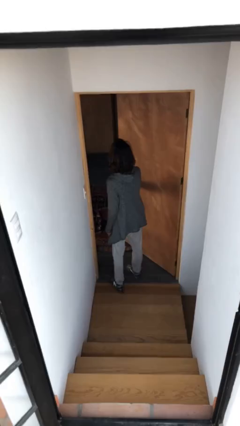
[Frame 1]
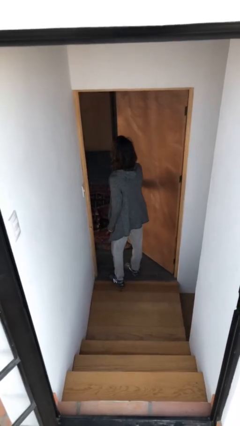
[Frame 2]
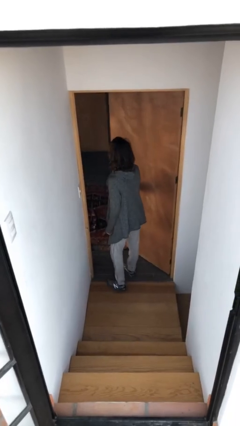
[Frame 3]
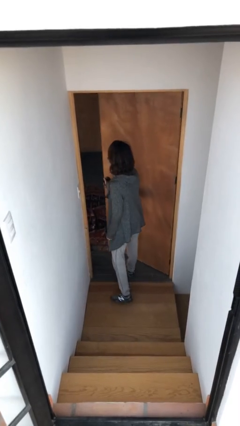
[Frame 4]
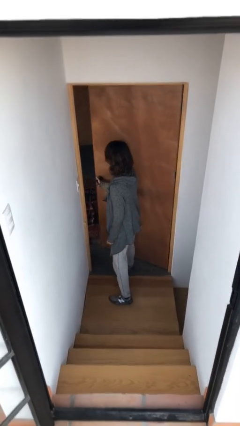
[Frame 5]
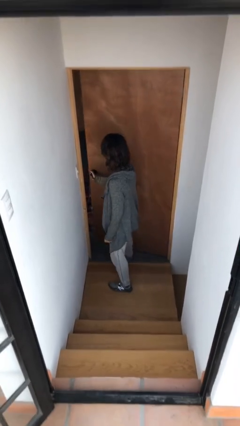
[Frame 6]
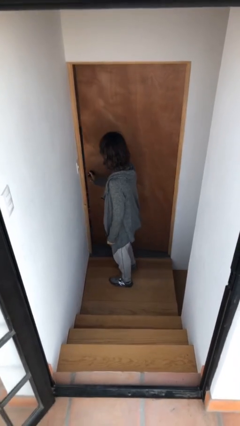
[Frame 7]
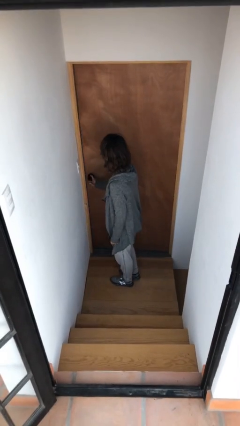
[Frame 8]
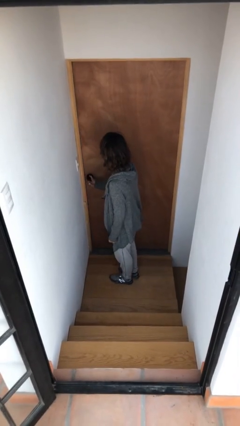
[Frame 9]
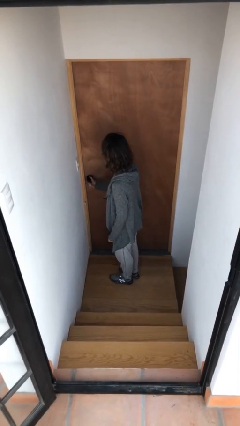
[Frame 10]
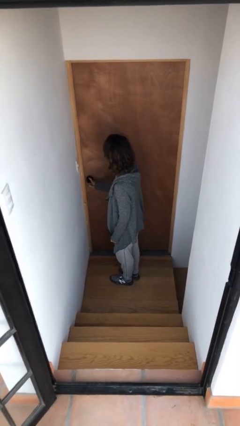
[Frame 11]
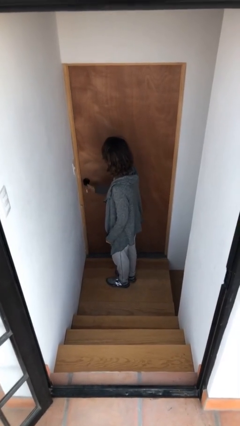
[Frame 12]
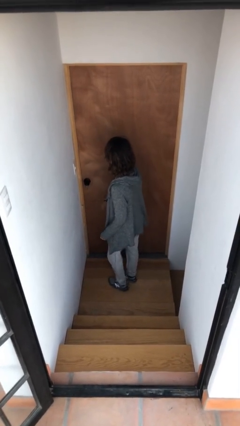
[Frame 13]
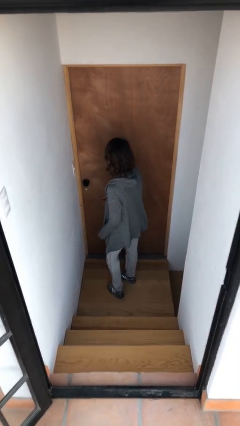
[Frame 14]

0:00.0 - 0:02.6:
person closes facility door

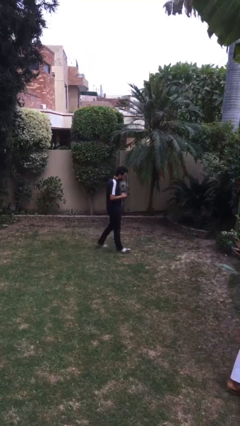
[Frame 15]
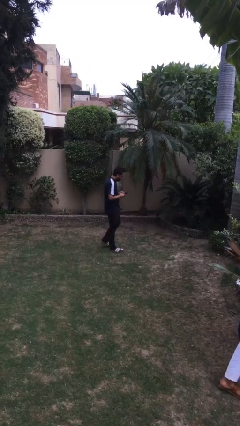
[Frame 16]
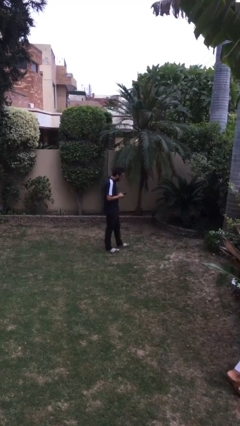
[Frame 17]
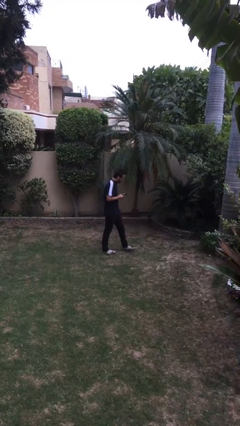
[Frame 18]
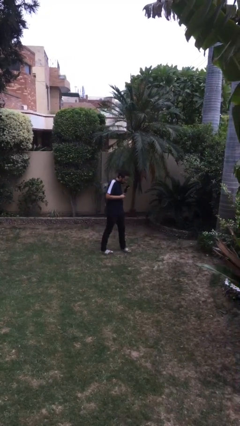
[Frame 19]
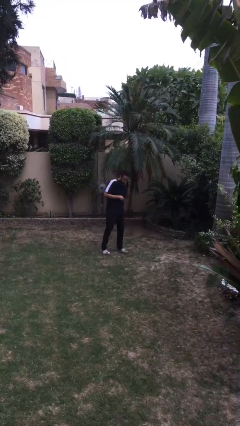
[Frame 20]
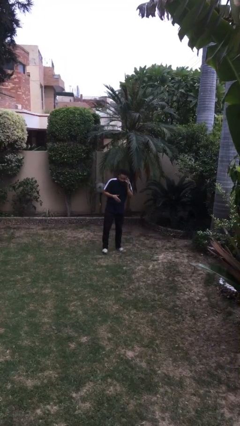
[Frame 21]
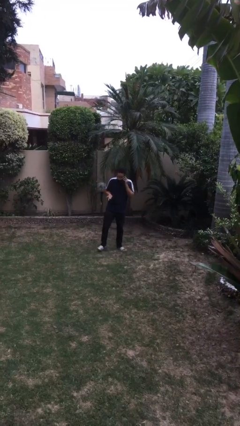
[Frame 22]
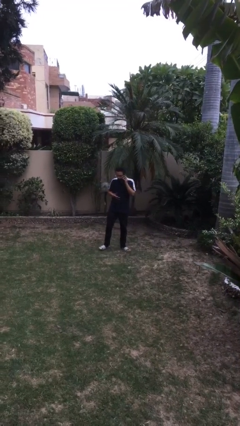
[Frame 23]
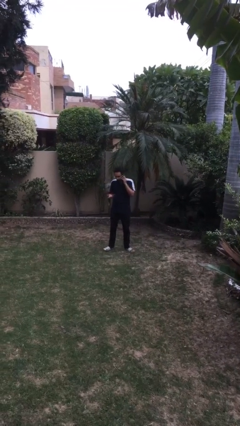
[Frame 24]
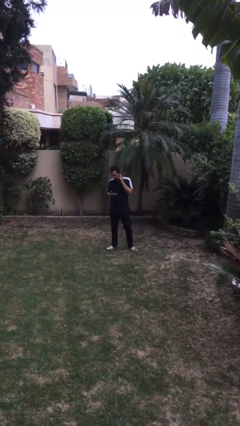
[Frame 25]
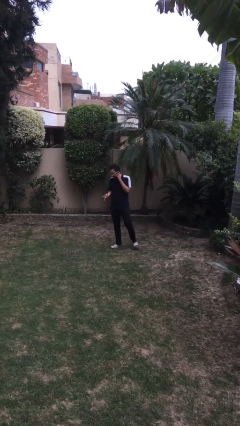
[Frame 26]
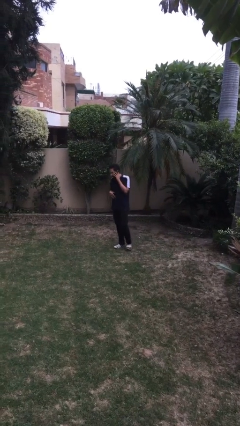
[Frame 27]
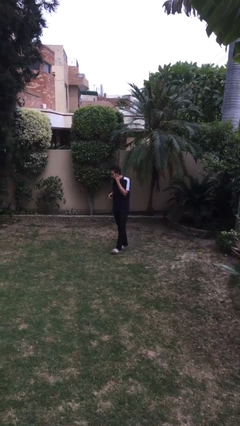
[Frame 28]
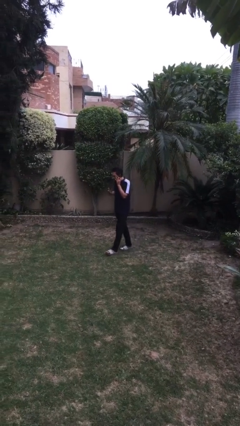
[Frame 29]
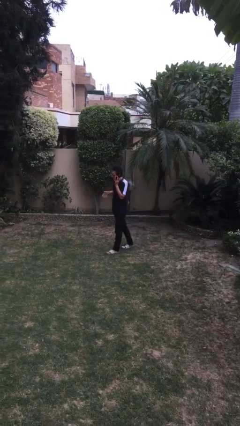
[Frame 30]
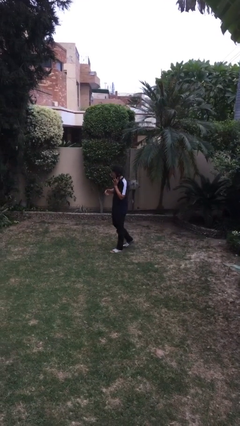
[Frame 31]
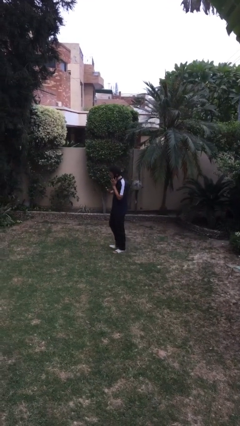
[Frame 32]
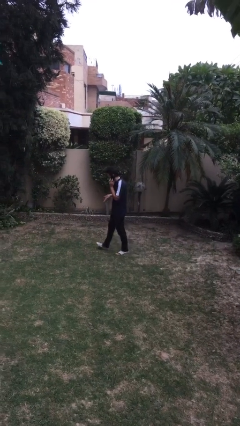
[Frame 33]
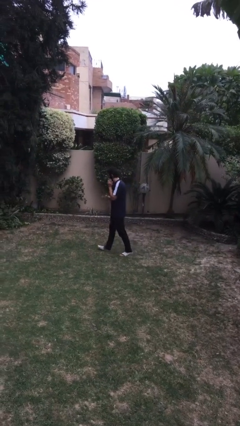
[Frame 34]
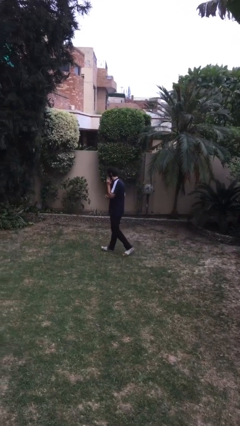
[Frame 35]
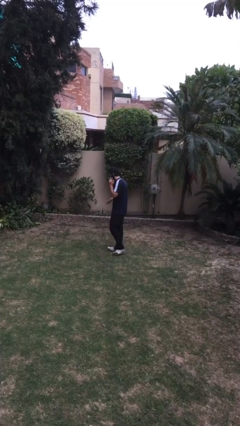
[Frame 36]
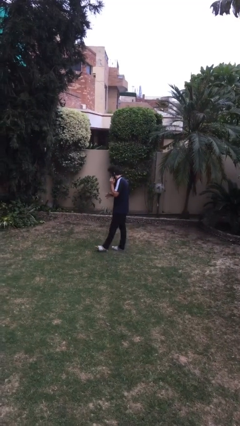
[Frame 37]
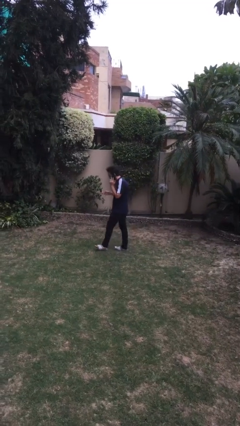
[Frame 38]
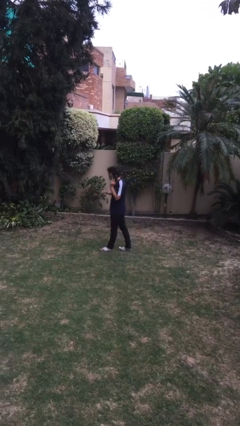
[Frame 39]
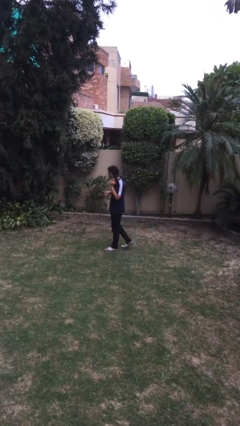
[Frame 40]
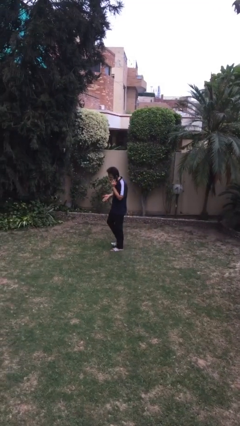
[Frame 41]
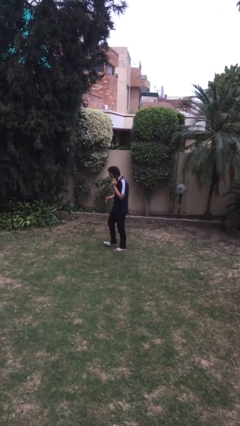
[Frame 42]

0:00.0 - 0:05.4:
person talks on phone

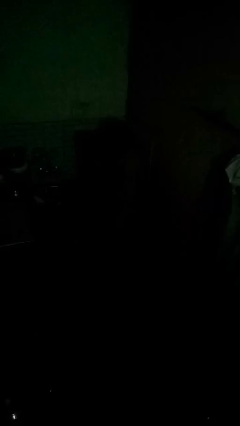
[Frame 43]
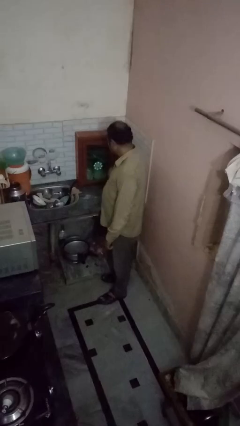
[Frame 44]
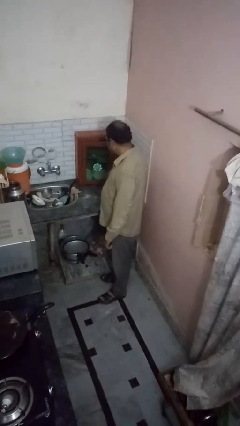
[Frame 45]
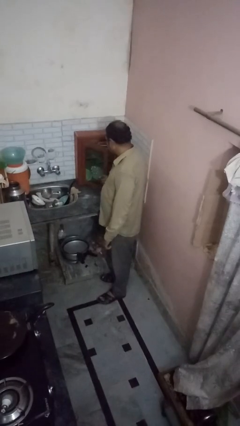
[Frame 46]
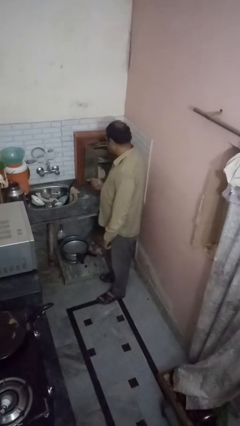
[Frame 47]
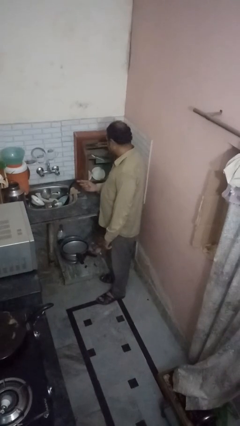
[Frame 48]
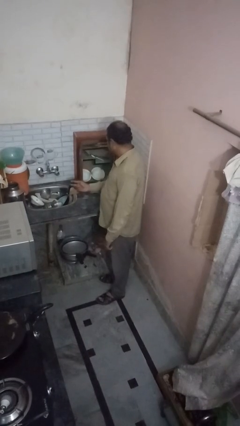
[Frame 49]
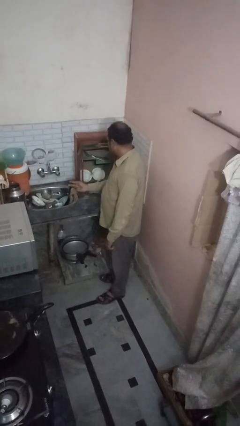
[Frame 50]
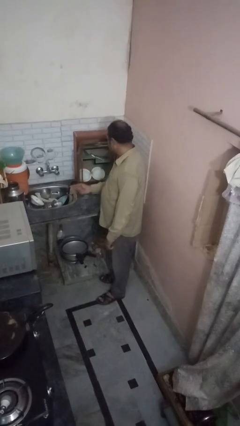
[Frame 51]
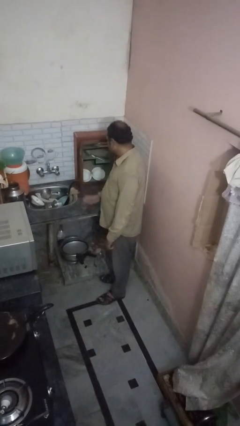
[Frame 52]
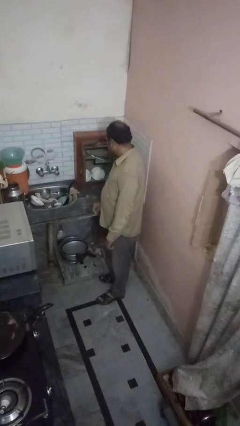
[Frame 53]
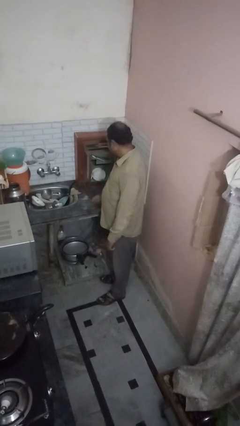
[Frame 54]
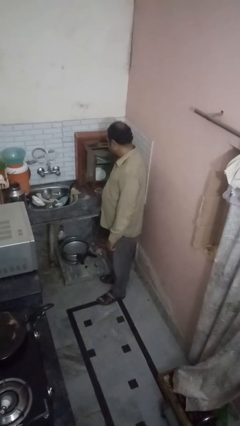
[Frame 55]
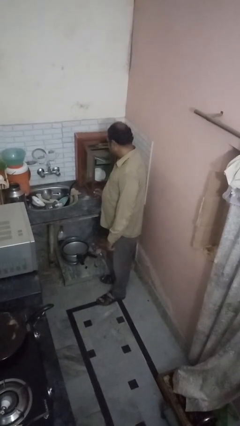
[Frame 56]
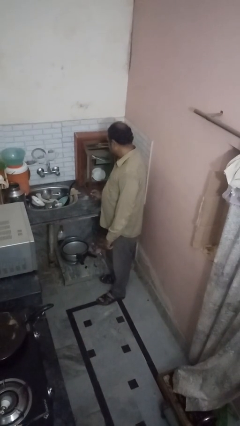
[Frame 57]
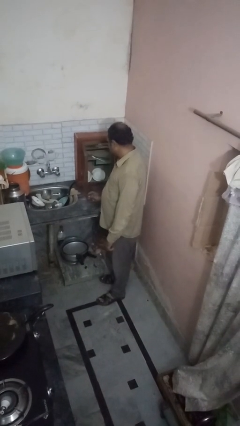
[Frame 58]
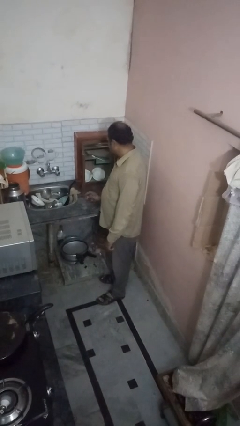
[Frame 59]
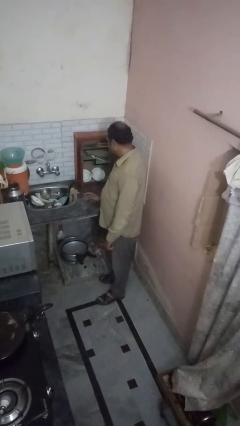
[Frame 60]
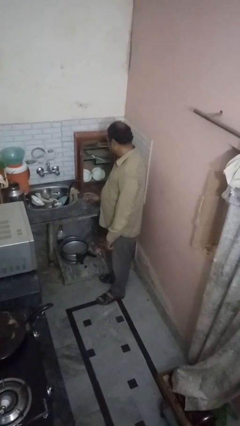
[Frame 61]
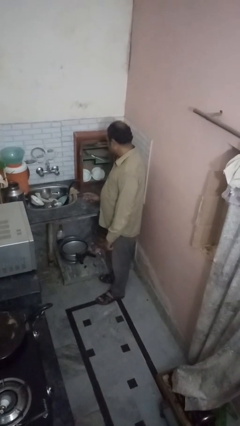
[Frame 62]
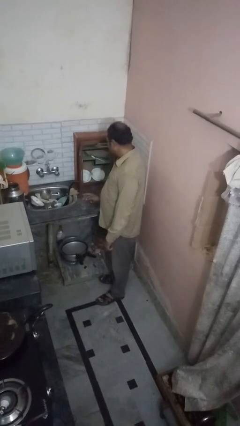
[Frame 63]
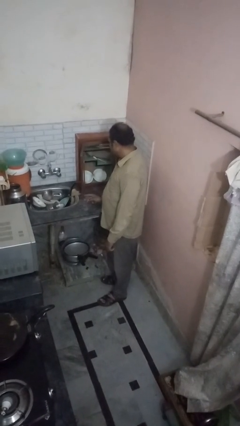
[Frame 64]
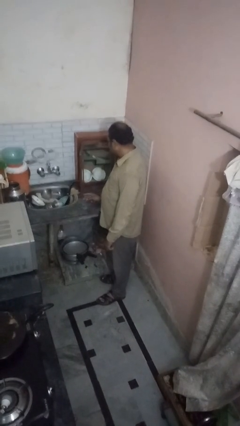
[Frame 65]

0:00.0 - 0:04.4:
person opens cabinet

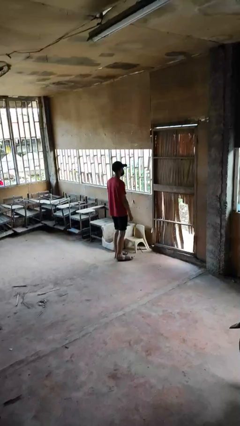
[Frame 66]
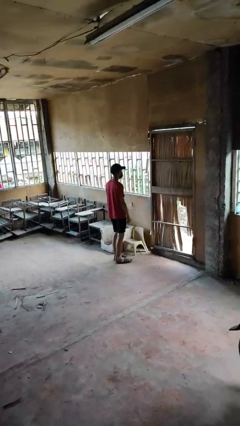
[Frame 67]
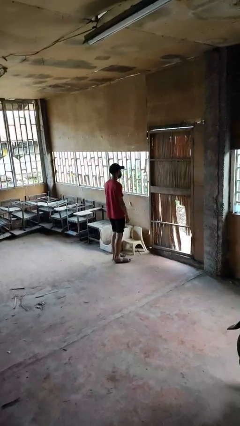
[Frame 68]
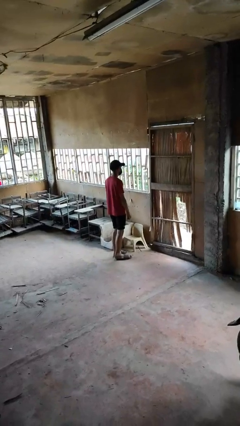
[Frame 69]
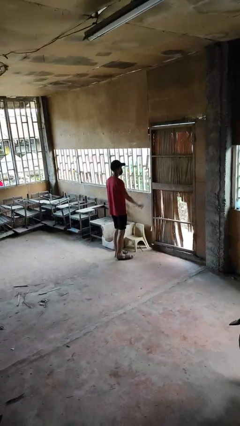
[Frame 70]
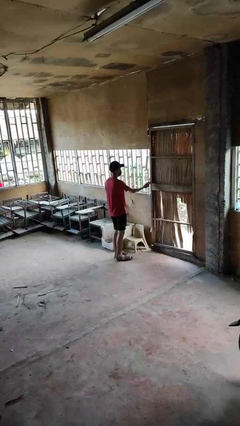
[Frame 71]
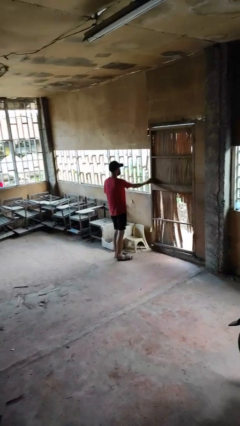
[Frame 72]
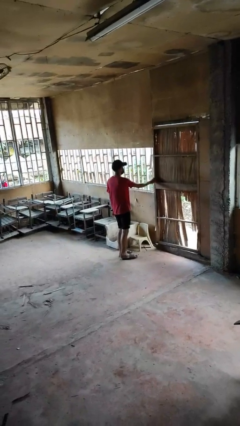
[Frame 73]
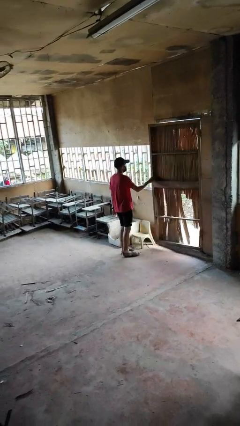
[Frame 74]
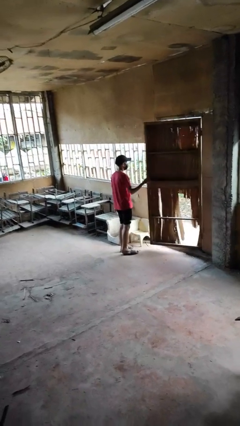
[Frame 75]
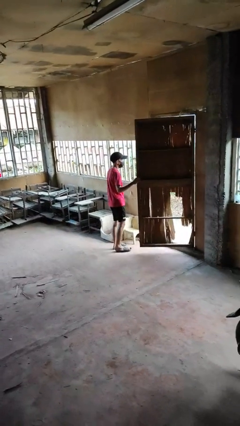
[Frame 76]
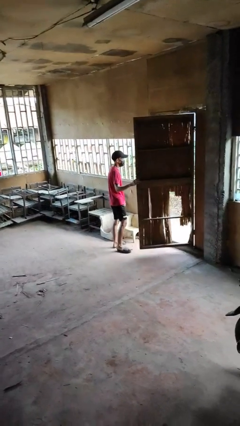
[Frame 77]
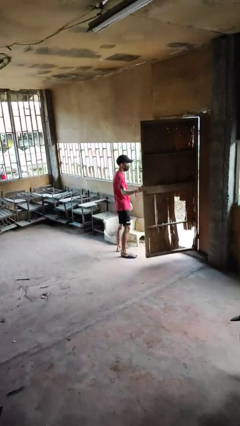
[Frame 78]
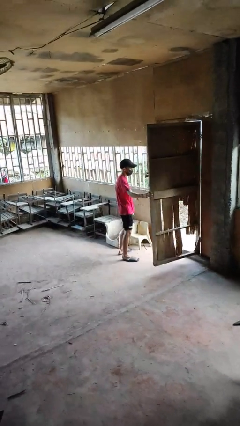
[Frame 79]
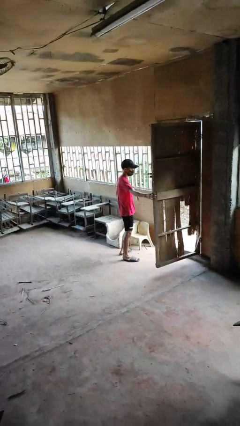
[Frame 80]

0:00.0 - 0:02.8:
person opens facility door

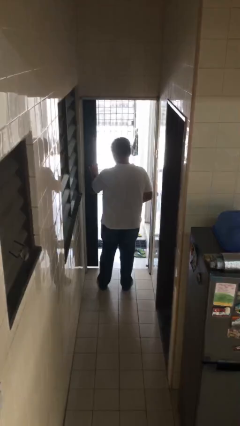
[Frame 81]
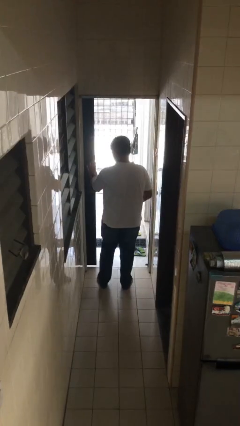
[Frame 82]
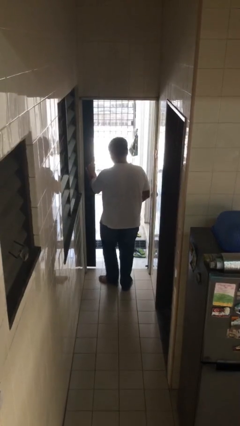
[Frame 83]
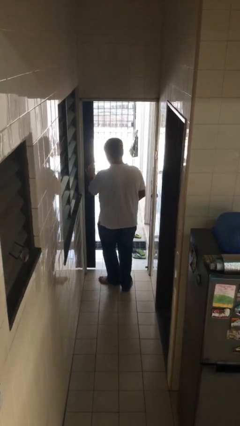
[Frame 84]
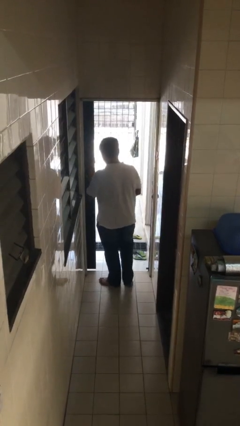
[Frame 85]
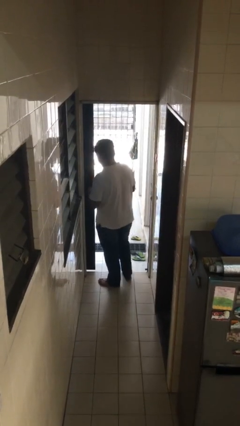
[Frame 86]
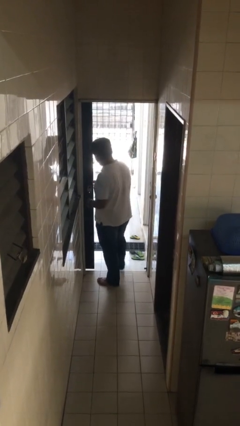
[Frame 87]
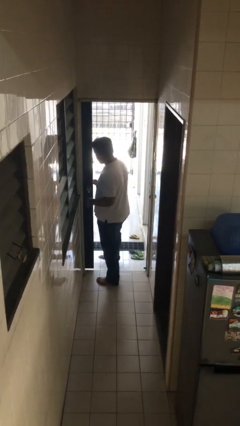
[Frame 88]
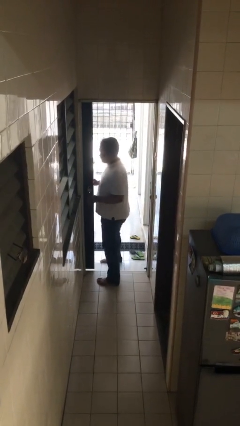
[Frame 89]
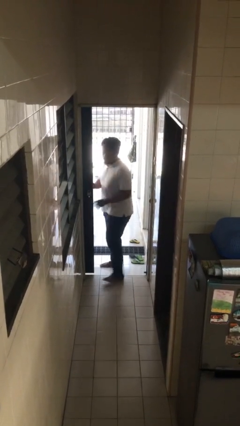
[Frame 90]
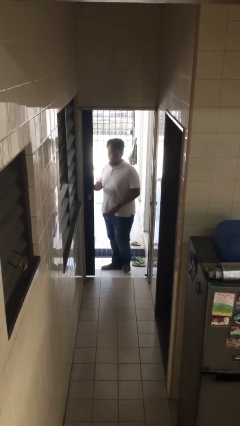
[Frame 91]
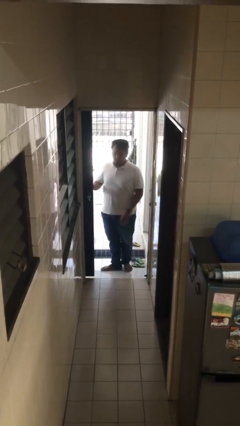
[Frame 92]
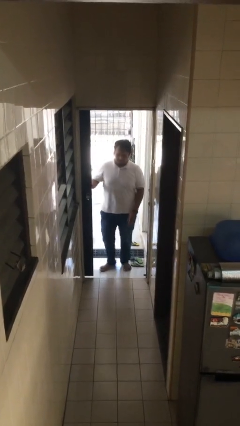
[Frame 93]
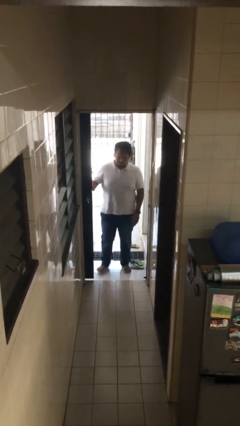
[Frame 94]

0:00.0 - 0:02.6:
person exits scene through structure
